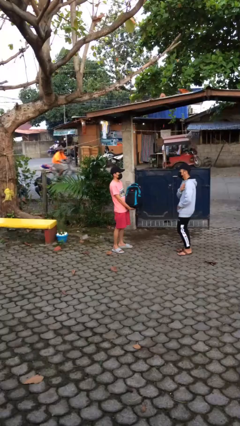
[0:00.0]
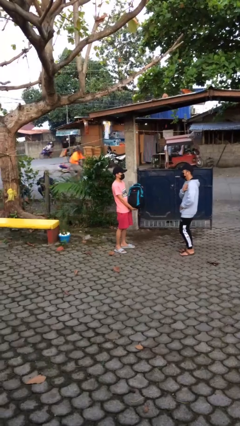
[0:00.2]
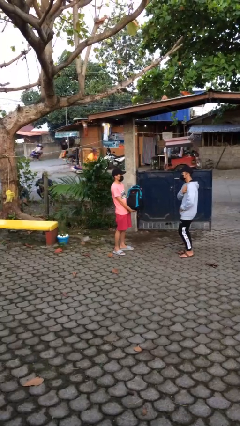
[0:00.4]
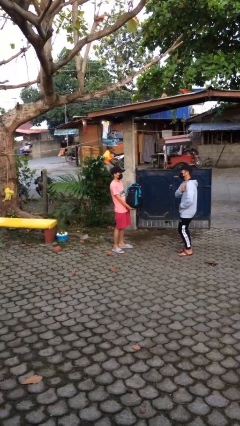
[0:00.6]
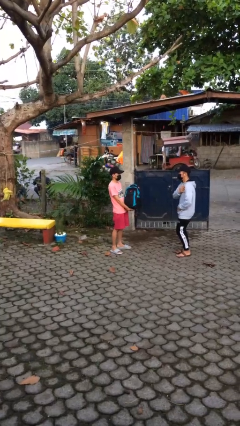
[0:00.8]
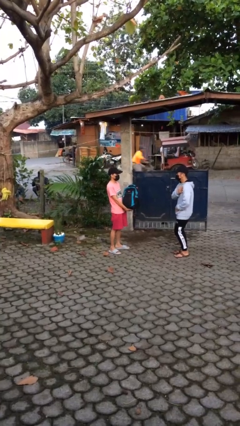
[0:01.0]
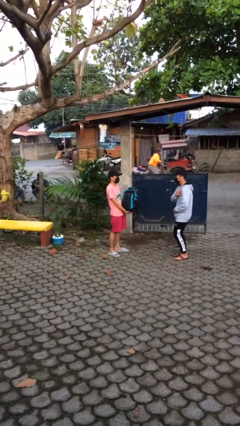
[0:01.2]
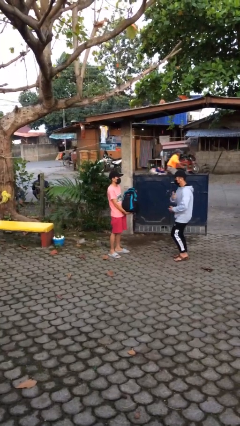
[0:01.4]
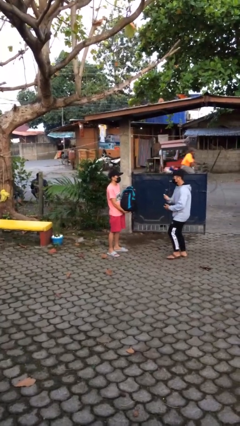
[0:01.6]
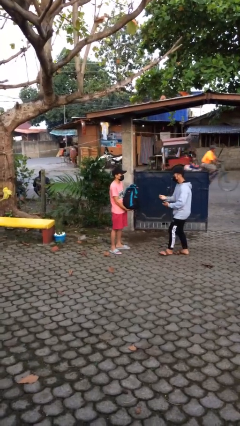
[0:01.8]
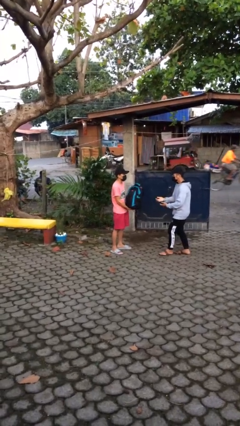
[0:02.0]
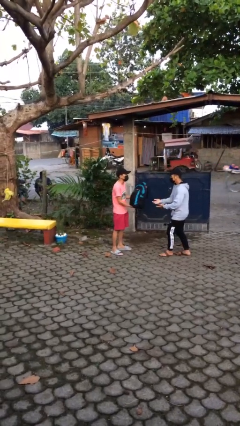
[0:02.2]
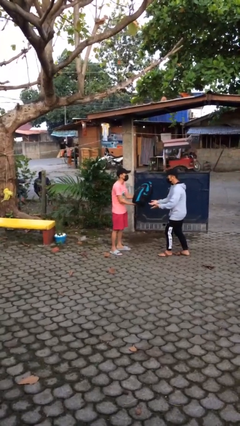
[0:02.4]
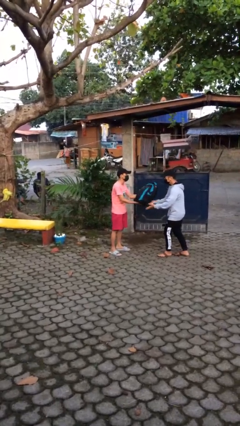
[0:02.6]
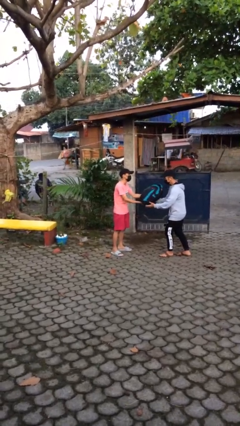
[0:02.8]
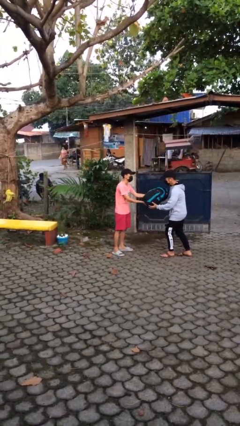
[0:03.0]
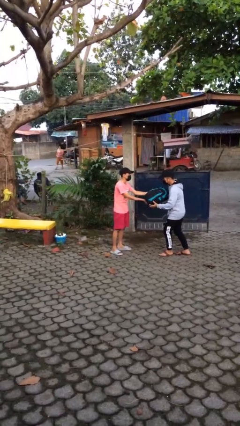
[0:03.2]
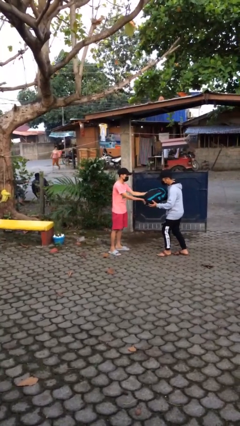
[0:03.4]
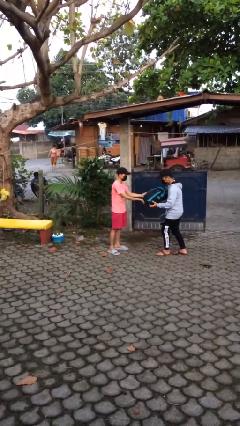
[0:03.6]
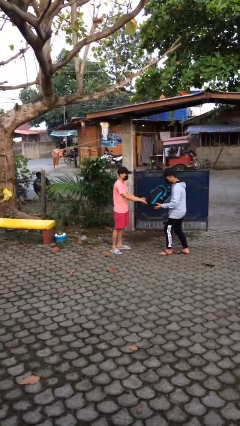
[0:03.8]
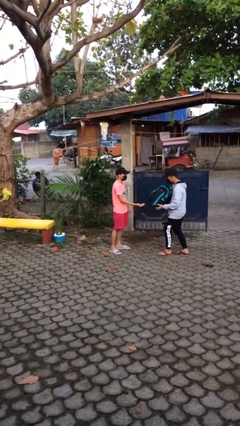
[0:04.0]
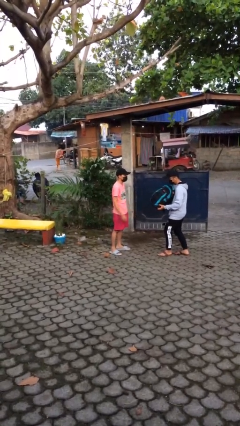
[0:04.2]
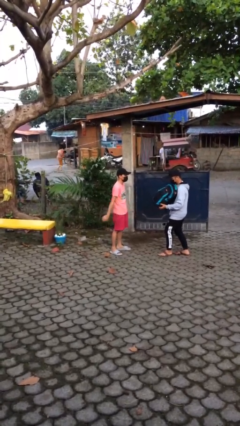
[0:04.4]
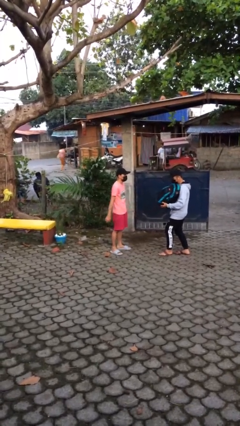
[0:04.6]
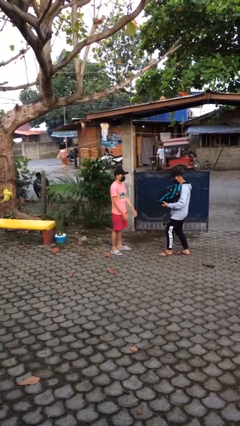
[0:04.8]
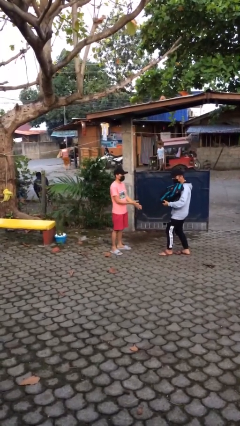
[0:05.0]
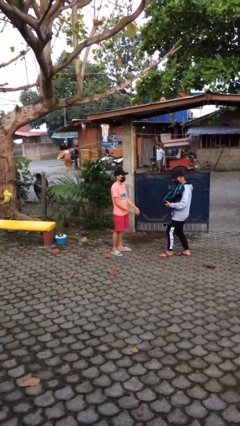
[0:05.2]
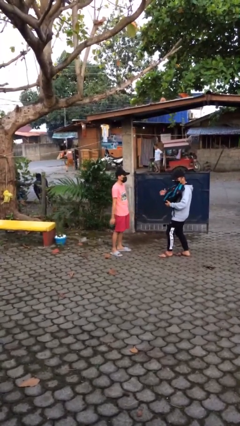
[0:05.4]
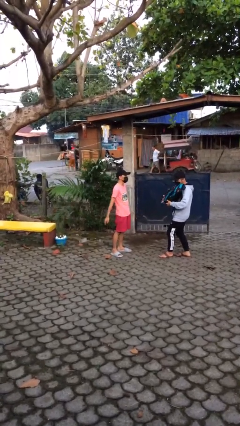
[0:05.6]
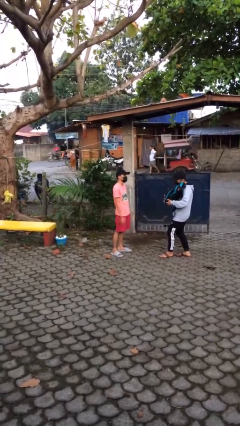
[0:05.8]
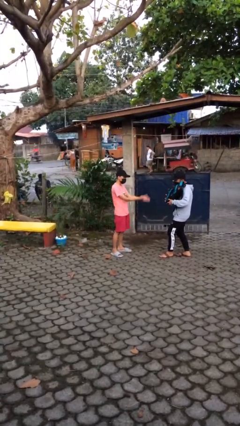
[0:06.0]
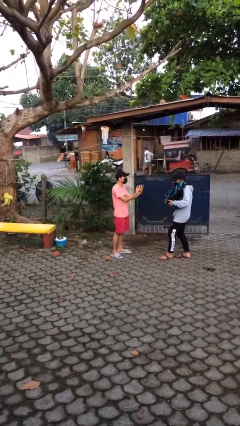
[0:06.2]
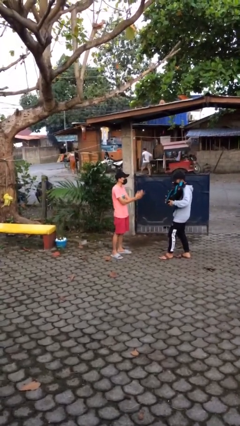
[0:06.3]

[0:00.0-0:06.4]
person transfers object to person

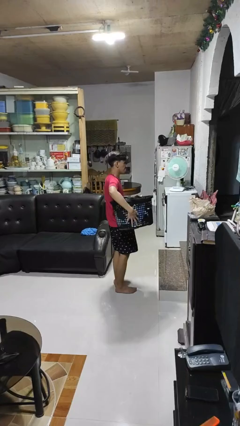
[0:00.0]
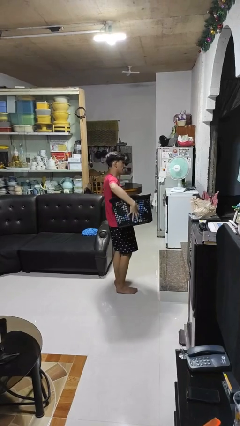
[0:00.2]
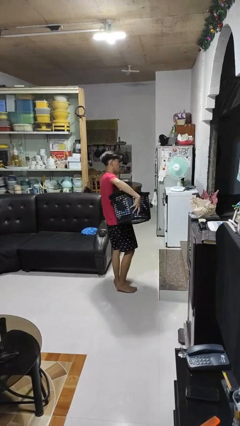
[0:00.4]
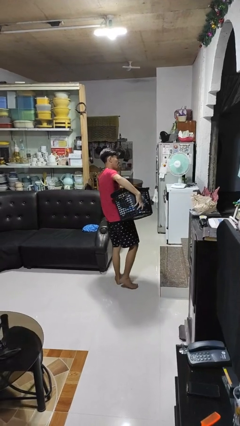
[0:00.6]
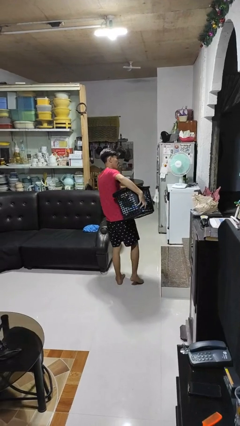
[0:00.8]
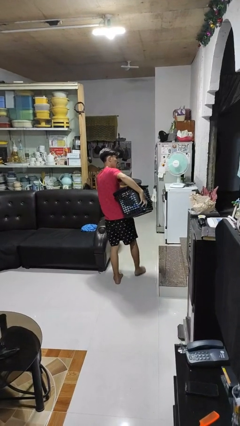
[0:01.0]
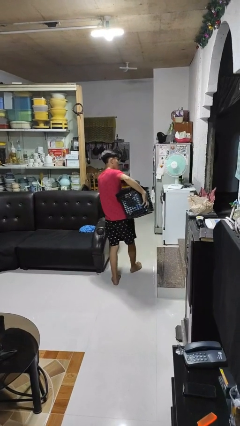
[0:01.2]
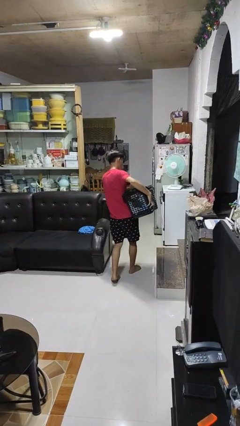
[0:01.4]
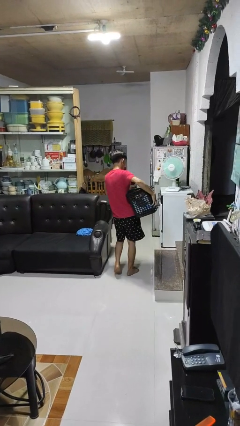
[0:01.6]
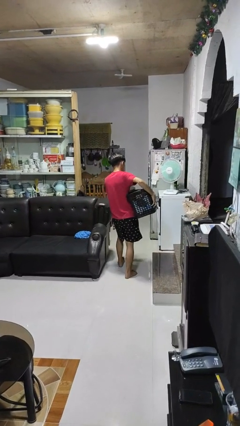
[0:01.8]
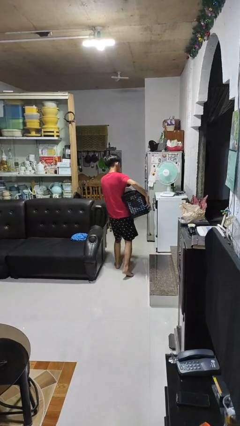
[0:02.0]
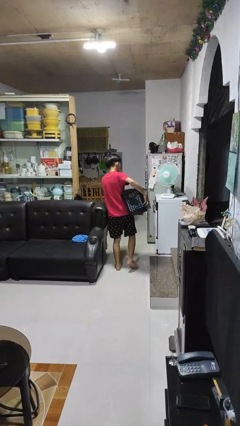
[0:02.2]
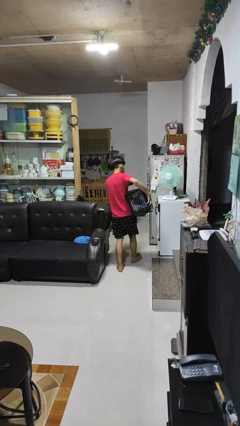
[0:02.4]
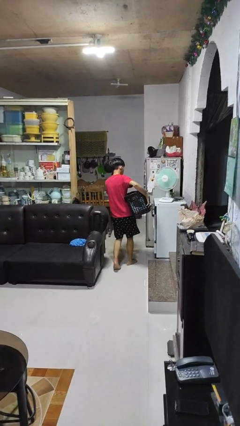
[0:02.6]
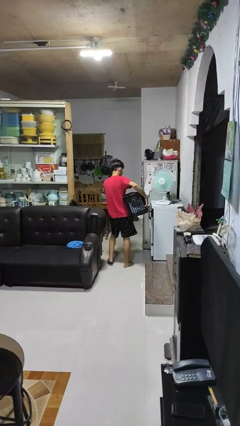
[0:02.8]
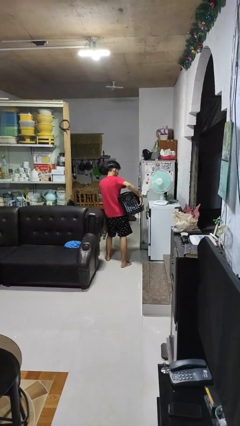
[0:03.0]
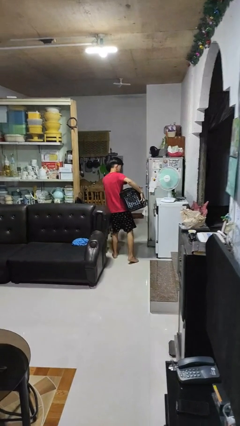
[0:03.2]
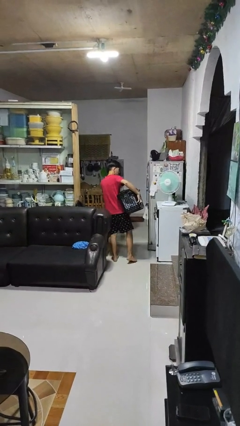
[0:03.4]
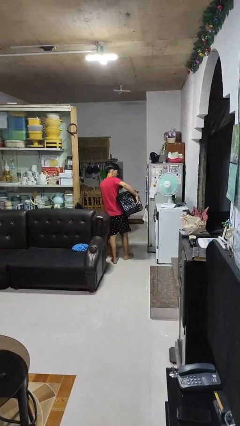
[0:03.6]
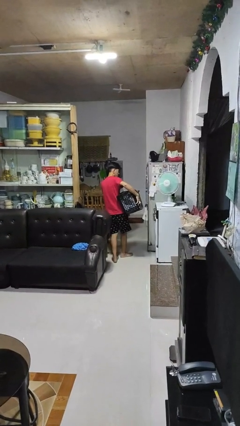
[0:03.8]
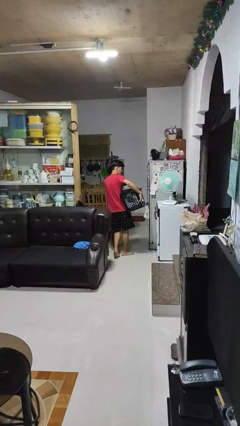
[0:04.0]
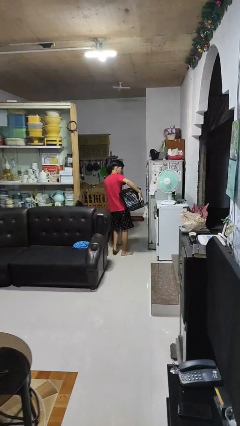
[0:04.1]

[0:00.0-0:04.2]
person carries laundry basket

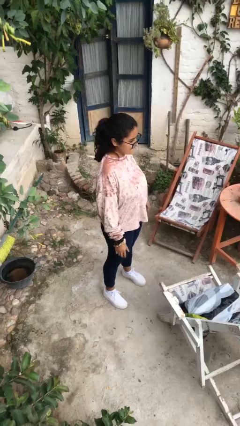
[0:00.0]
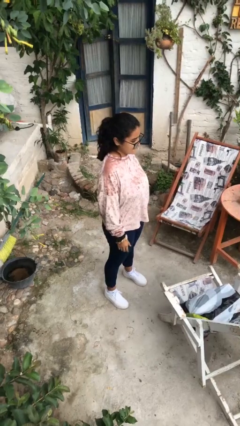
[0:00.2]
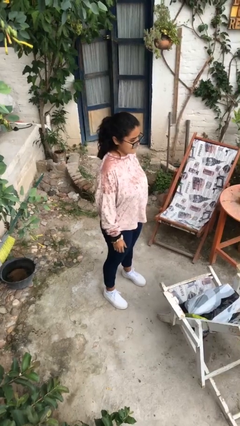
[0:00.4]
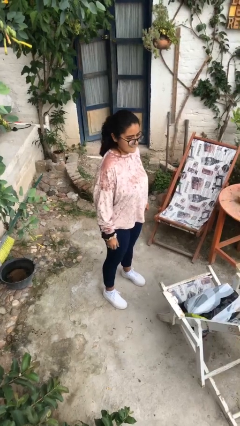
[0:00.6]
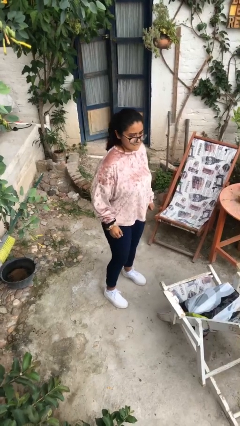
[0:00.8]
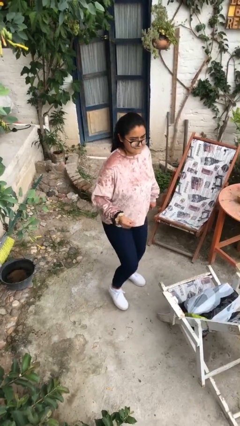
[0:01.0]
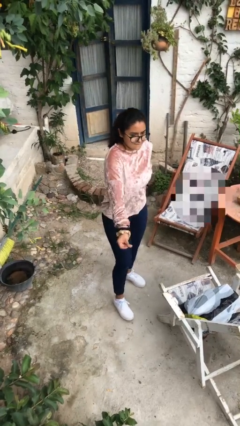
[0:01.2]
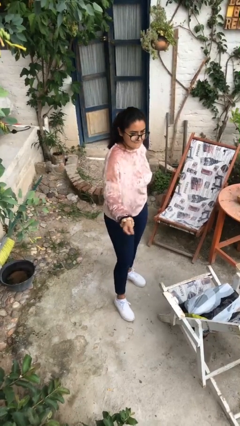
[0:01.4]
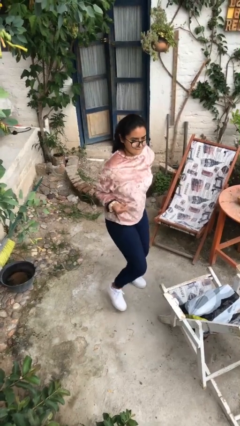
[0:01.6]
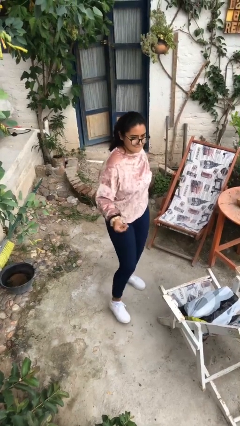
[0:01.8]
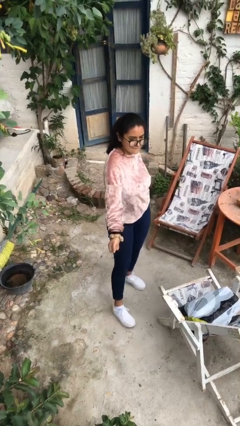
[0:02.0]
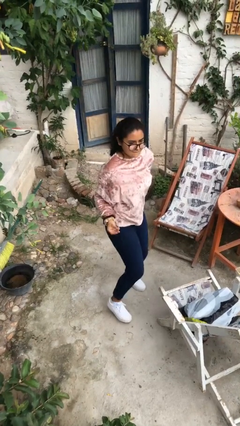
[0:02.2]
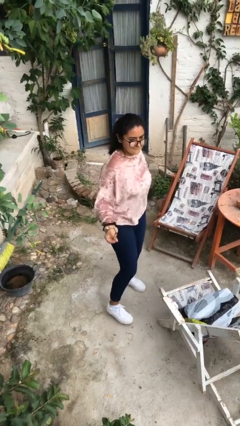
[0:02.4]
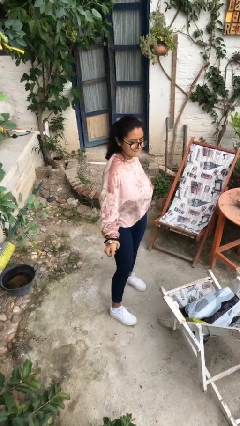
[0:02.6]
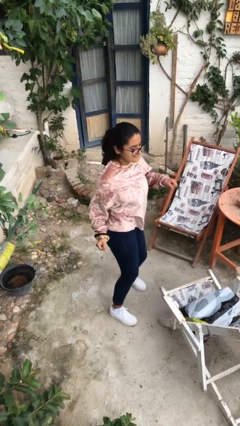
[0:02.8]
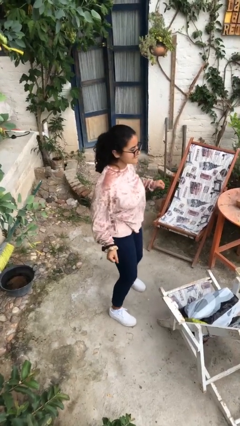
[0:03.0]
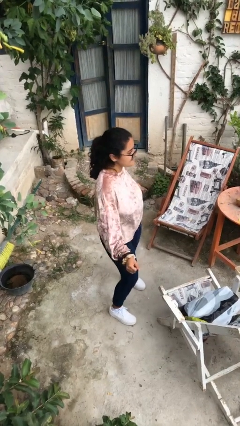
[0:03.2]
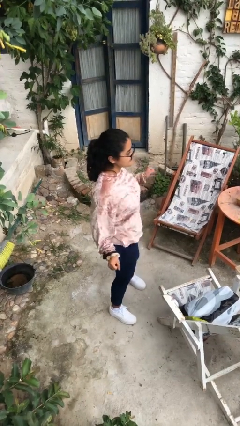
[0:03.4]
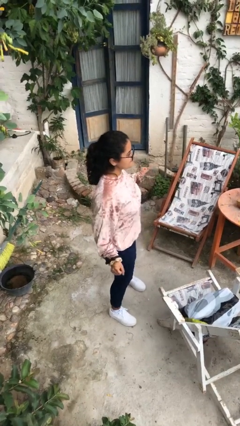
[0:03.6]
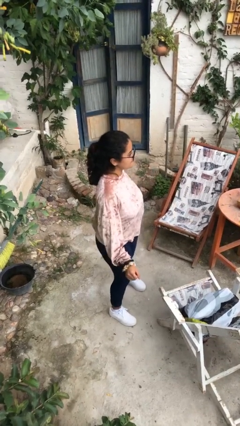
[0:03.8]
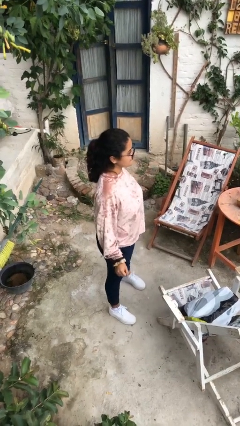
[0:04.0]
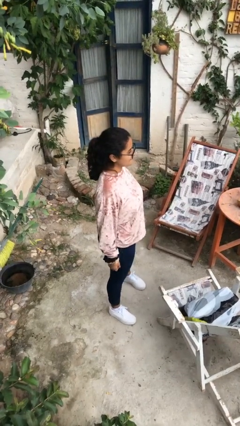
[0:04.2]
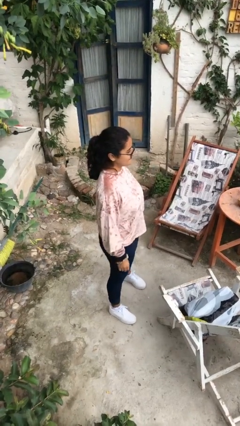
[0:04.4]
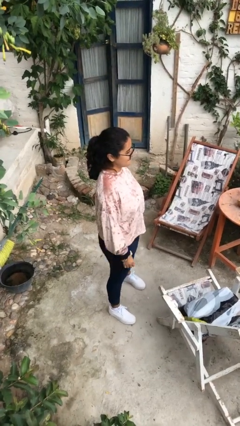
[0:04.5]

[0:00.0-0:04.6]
person dances in place

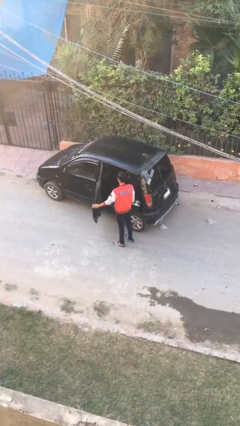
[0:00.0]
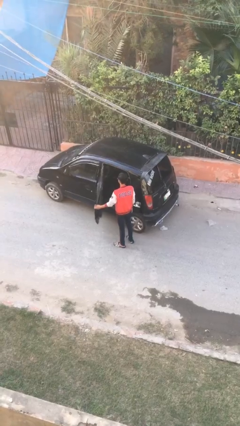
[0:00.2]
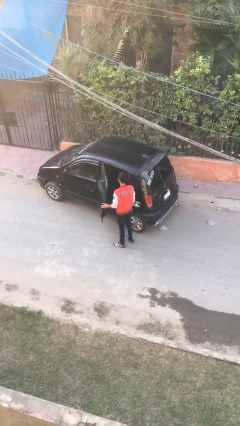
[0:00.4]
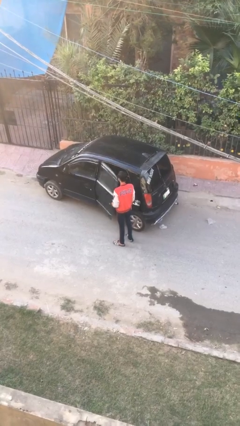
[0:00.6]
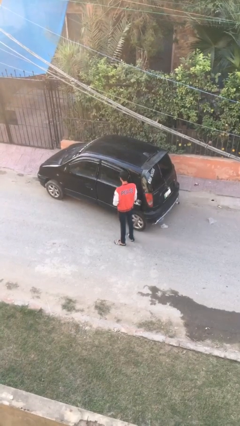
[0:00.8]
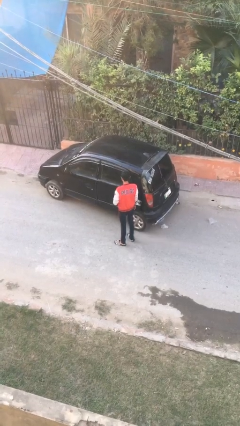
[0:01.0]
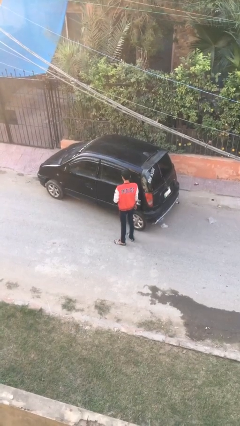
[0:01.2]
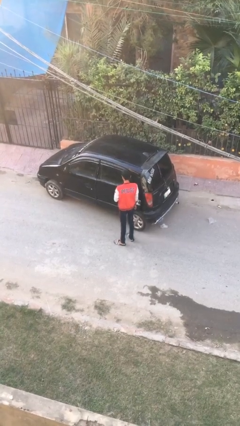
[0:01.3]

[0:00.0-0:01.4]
person closes car door

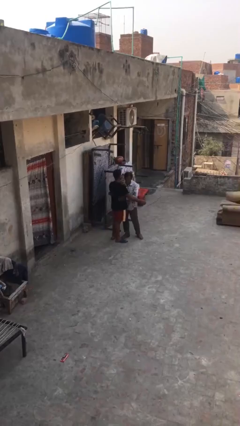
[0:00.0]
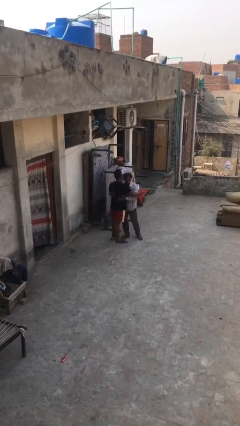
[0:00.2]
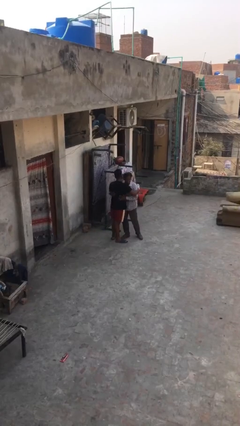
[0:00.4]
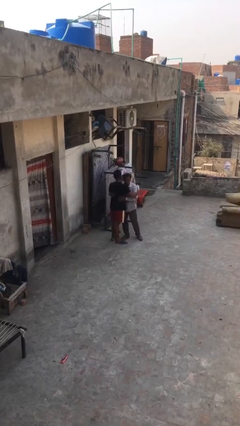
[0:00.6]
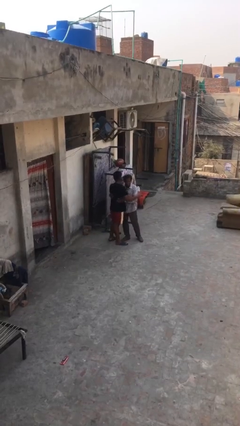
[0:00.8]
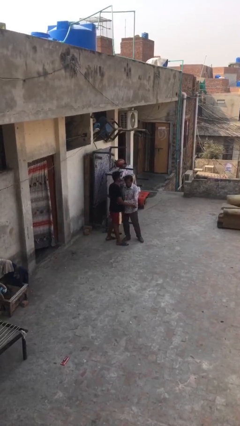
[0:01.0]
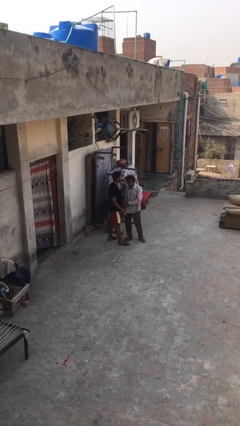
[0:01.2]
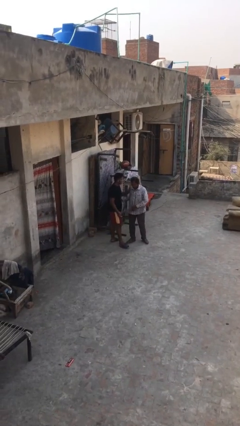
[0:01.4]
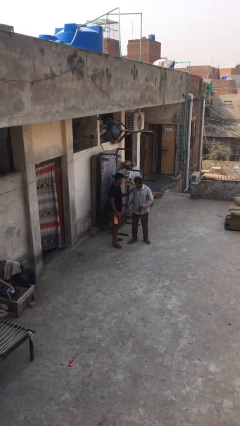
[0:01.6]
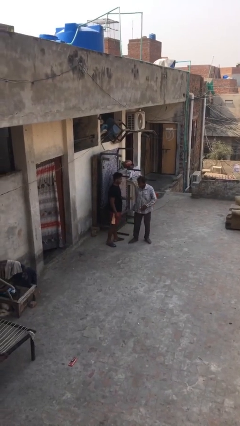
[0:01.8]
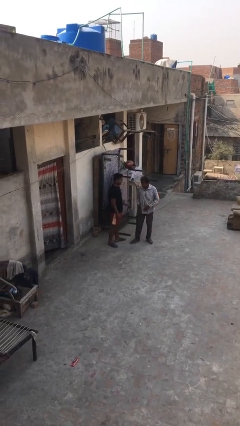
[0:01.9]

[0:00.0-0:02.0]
person embraces person
